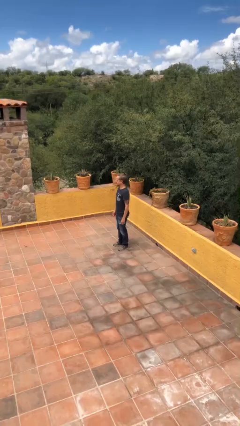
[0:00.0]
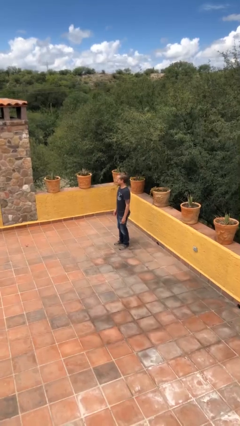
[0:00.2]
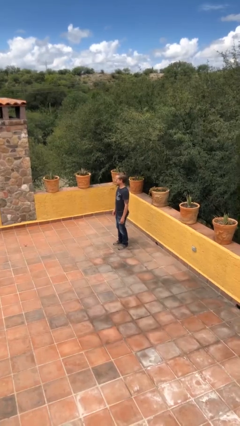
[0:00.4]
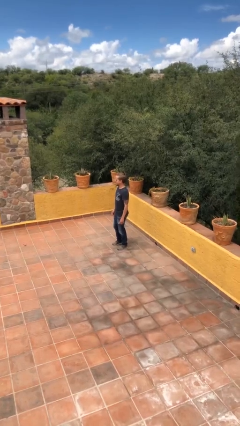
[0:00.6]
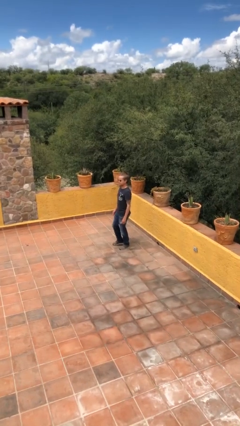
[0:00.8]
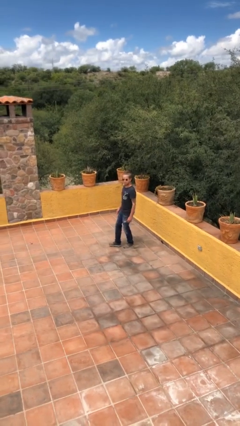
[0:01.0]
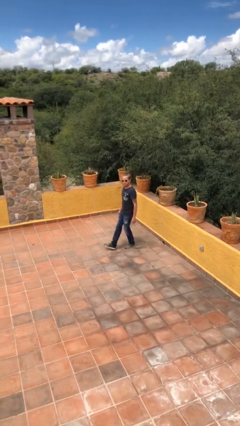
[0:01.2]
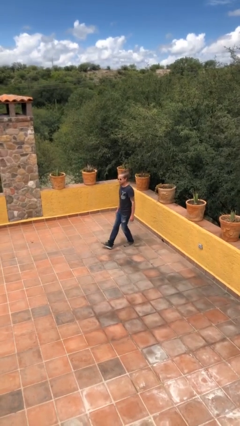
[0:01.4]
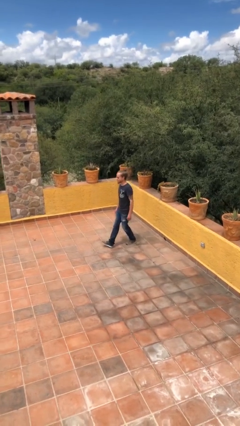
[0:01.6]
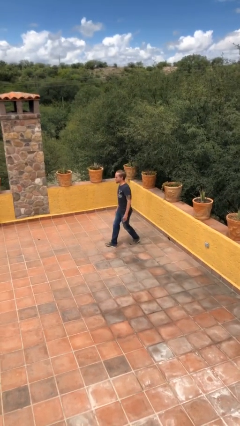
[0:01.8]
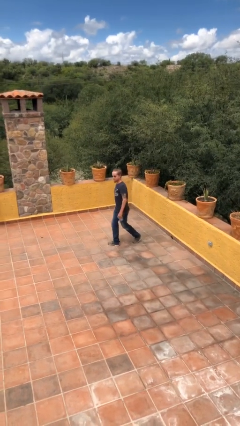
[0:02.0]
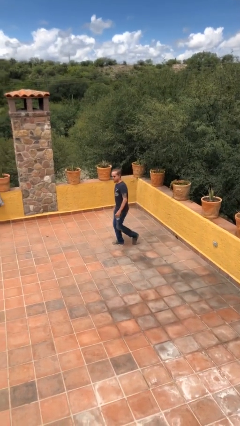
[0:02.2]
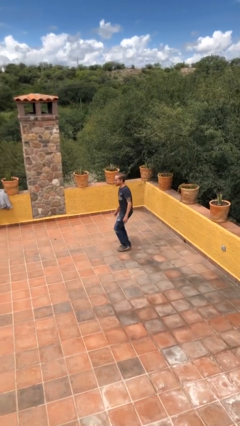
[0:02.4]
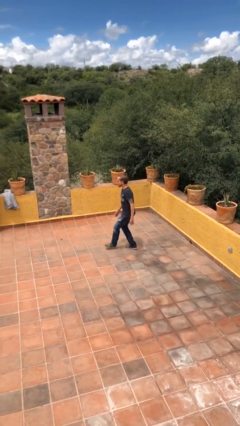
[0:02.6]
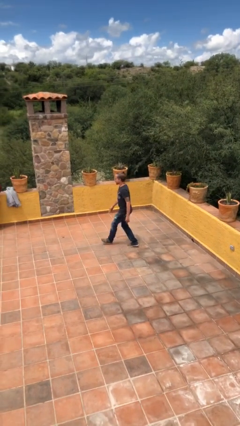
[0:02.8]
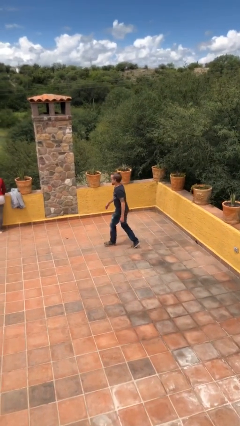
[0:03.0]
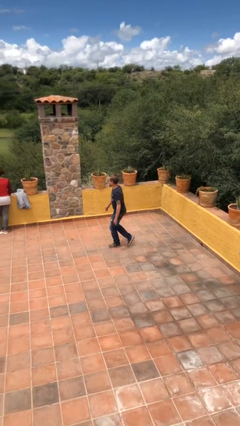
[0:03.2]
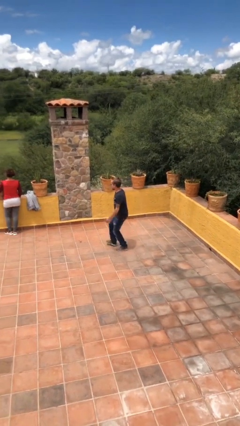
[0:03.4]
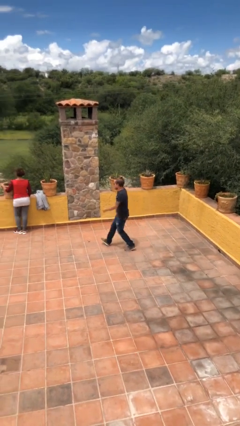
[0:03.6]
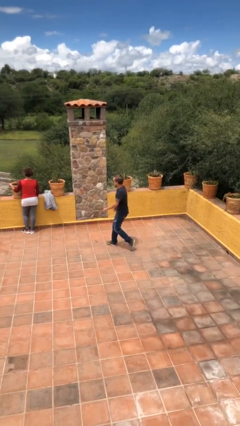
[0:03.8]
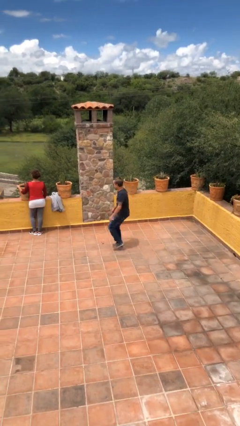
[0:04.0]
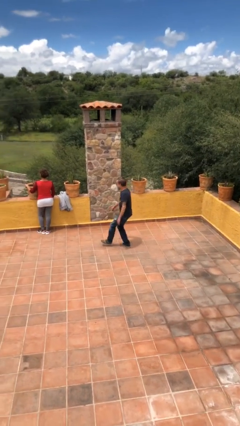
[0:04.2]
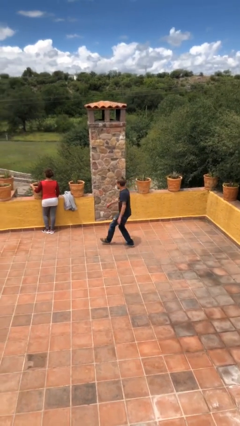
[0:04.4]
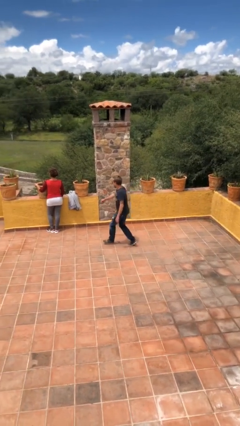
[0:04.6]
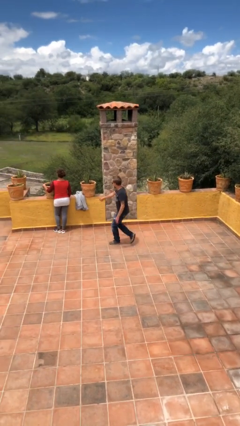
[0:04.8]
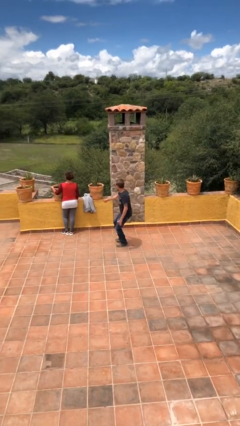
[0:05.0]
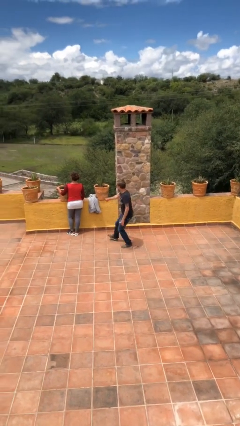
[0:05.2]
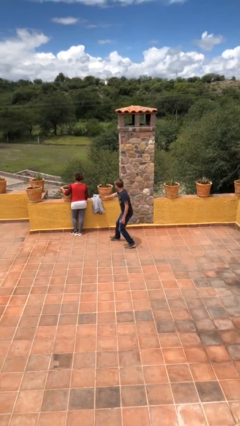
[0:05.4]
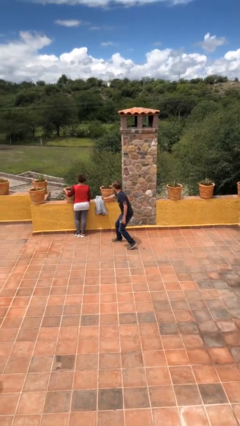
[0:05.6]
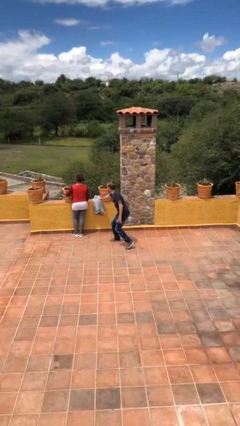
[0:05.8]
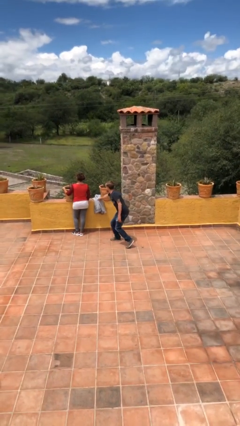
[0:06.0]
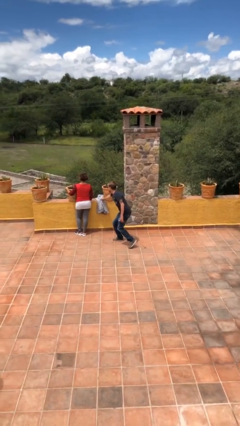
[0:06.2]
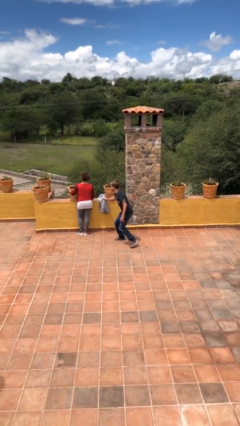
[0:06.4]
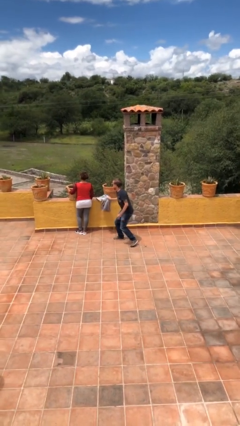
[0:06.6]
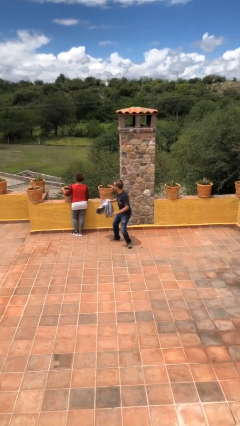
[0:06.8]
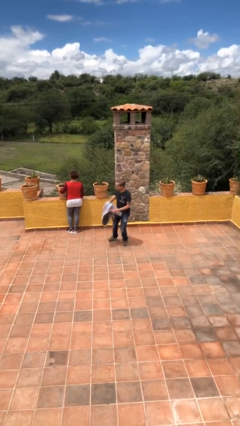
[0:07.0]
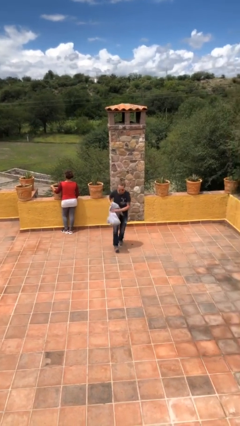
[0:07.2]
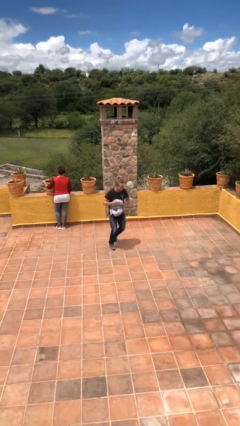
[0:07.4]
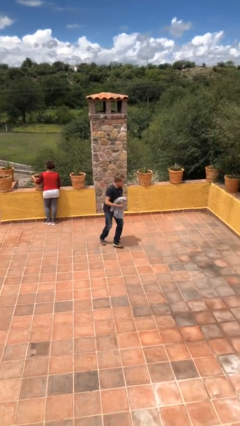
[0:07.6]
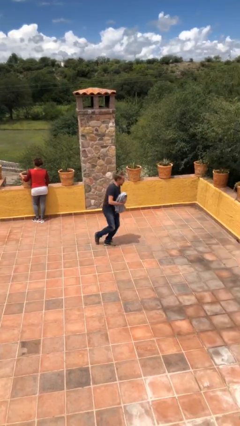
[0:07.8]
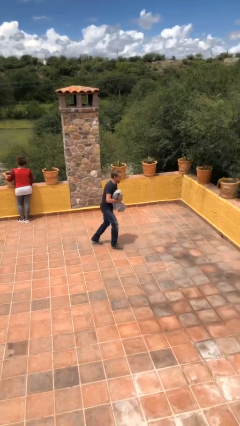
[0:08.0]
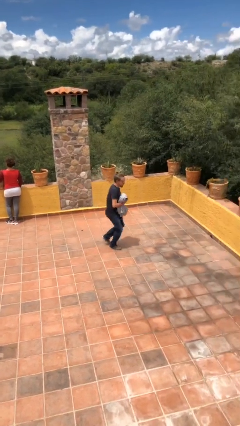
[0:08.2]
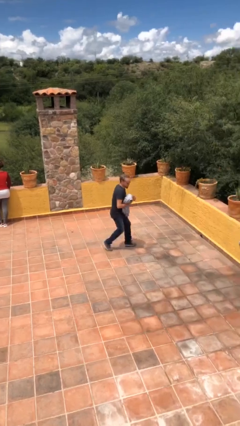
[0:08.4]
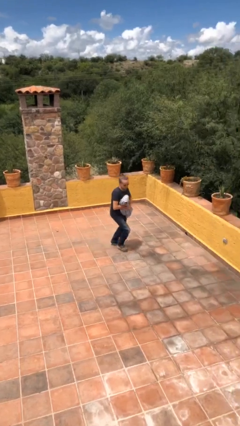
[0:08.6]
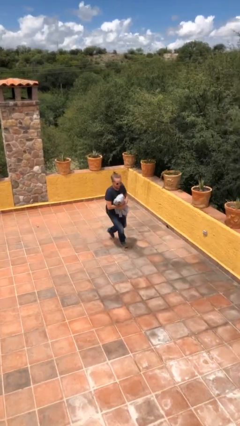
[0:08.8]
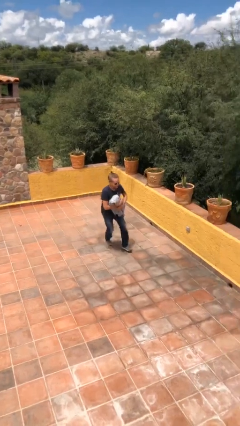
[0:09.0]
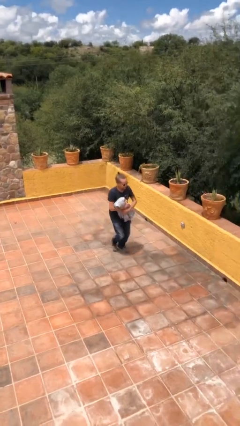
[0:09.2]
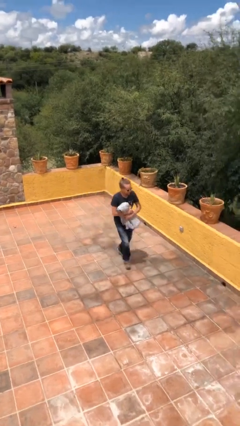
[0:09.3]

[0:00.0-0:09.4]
person steals object from person

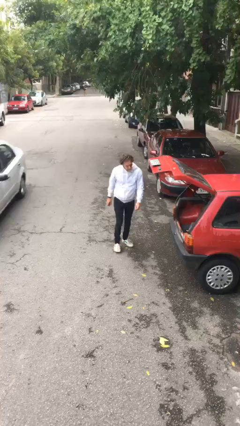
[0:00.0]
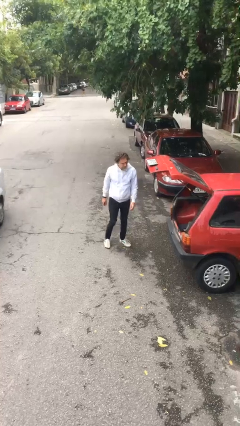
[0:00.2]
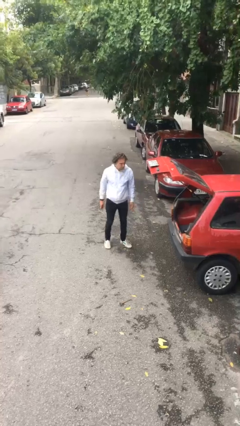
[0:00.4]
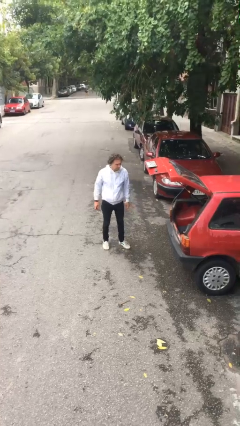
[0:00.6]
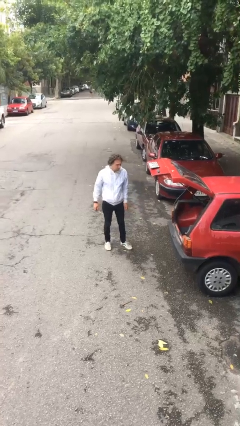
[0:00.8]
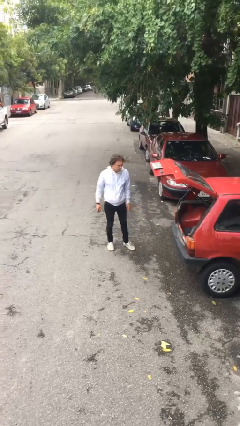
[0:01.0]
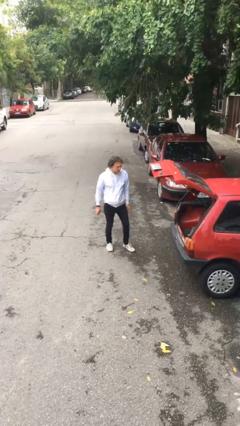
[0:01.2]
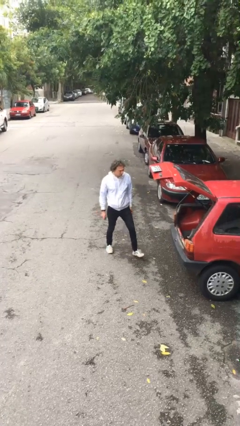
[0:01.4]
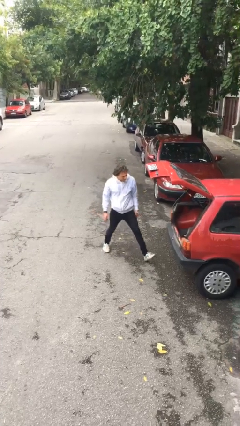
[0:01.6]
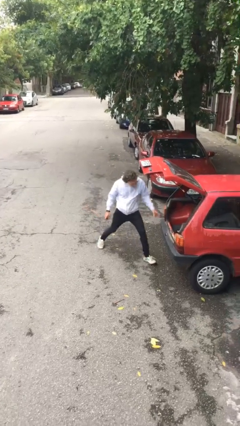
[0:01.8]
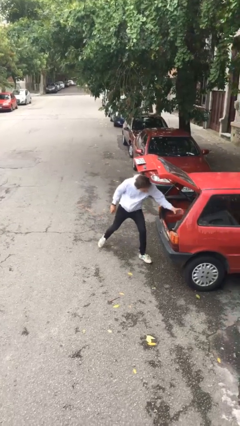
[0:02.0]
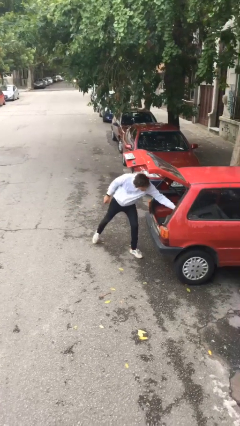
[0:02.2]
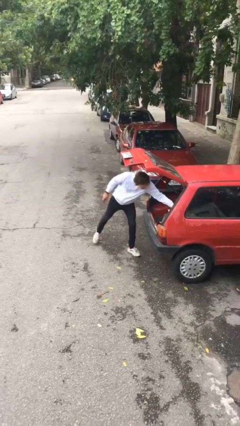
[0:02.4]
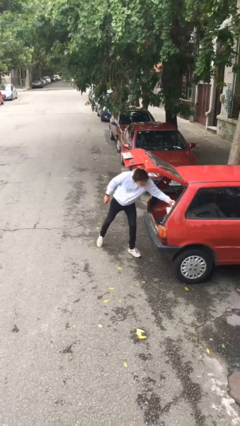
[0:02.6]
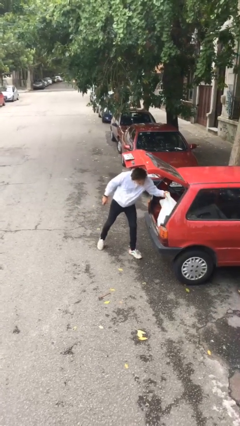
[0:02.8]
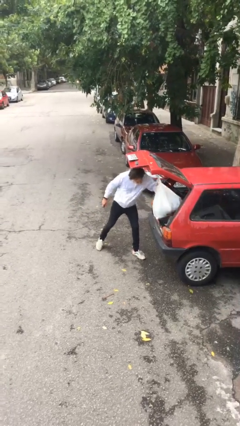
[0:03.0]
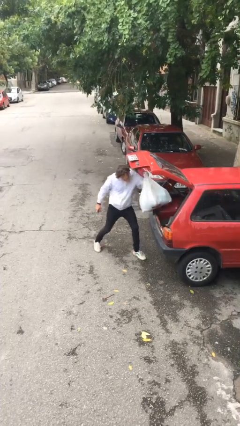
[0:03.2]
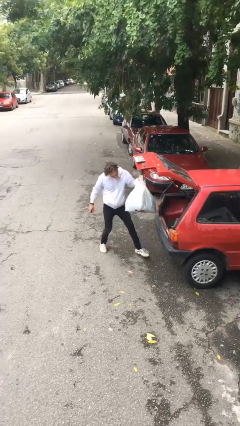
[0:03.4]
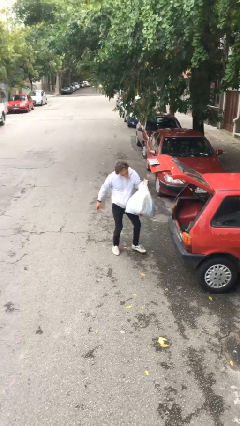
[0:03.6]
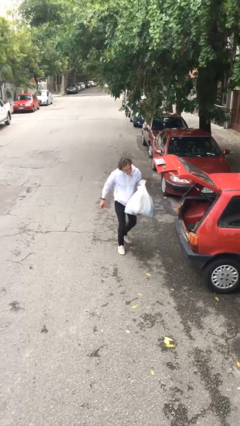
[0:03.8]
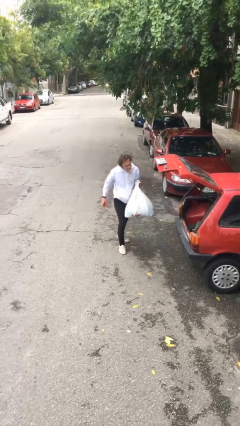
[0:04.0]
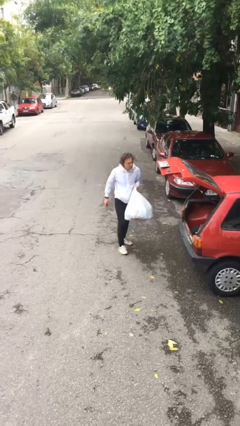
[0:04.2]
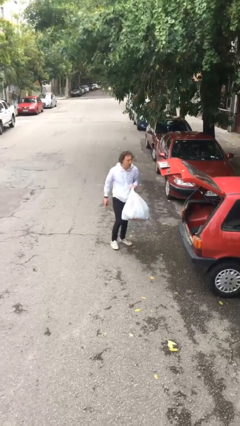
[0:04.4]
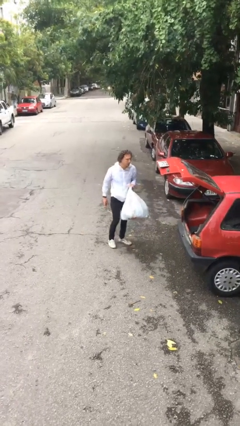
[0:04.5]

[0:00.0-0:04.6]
person unloads car

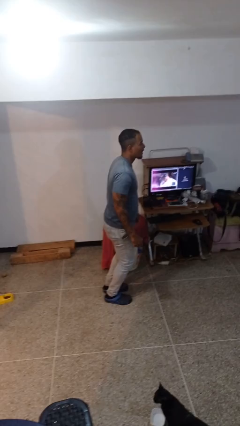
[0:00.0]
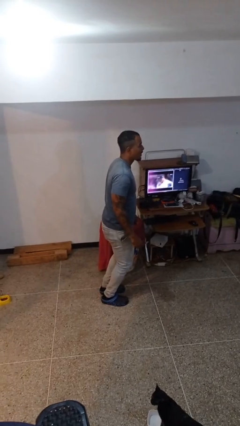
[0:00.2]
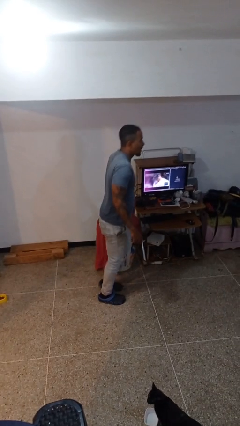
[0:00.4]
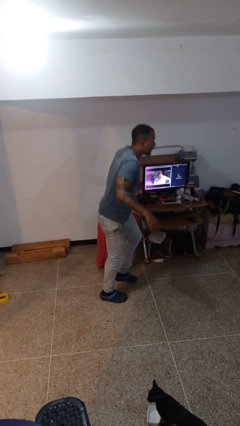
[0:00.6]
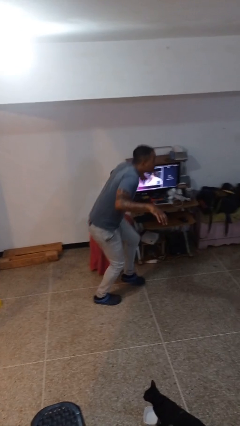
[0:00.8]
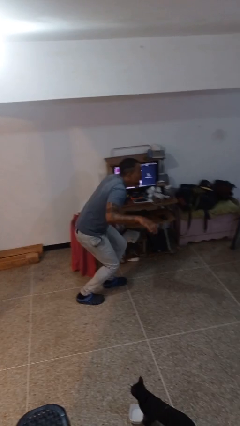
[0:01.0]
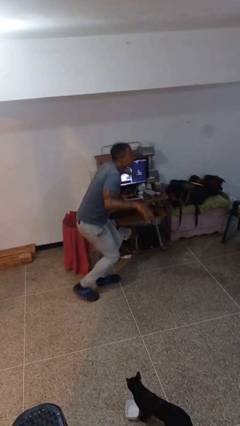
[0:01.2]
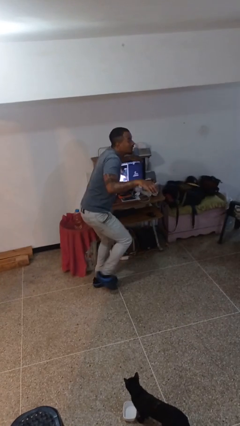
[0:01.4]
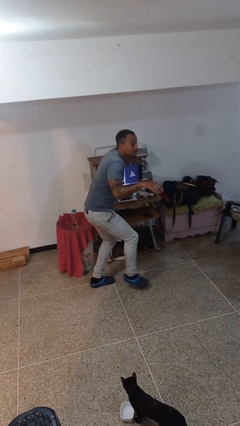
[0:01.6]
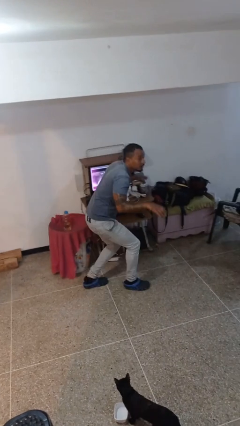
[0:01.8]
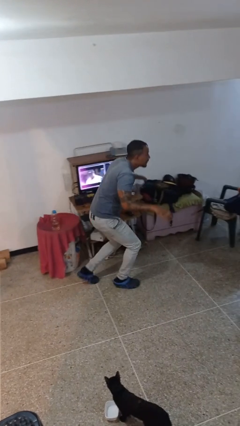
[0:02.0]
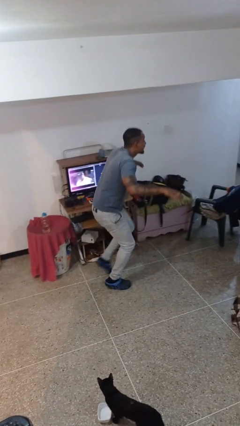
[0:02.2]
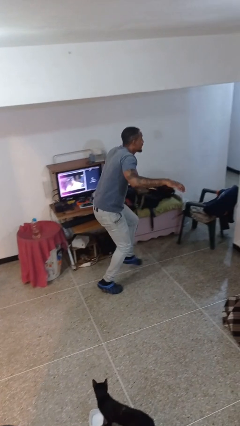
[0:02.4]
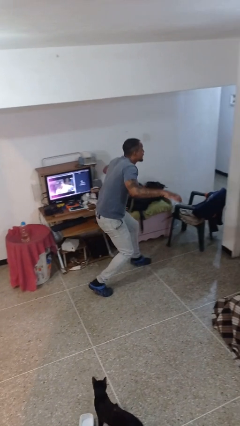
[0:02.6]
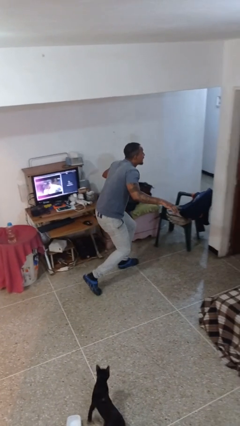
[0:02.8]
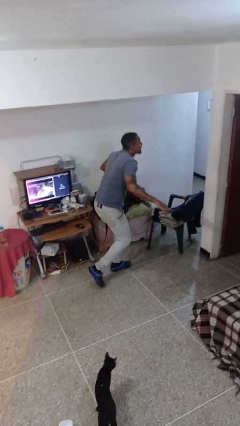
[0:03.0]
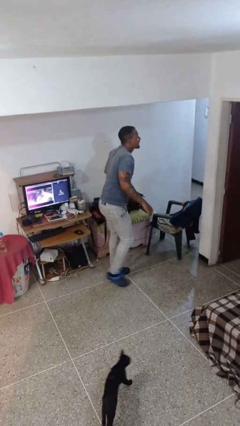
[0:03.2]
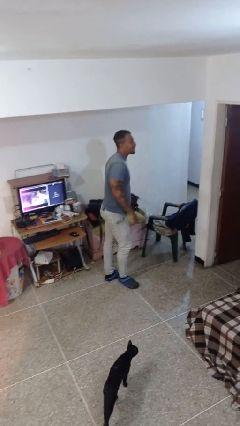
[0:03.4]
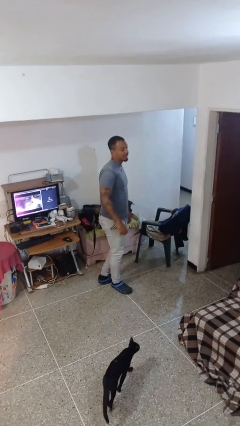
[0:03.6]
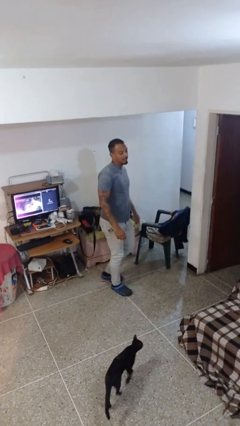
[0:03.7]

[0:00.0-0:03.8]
person walks tiptoe
